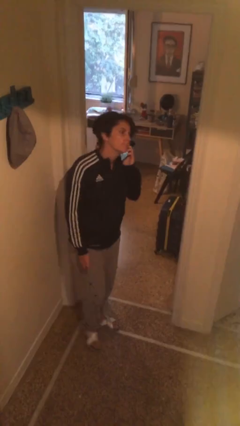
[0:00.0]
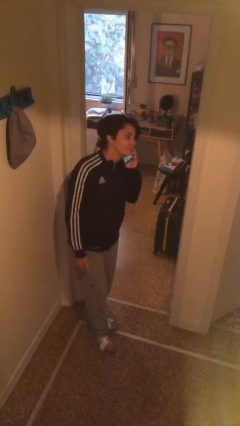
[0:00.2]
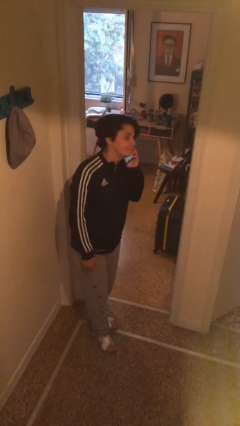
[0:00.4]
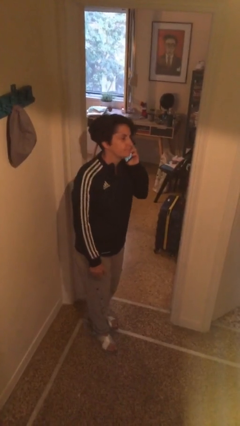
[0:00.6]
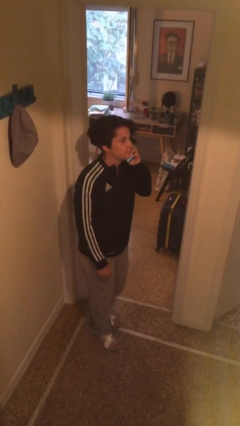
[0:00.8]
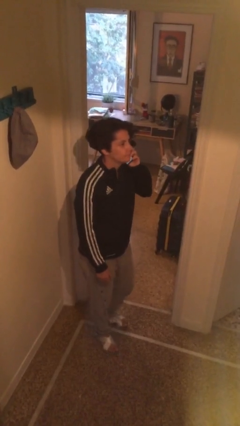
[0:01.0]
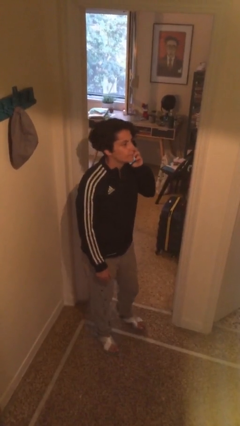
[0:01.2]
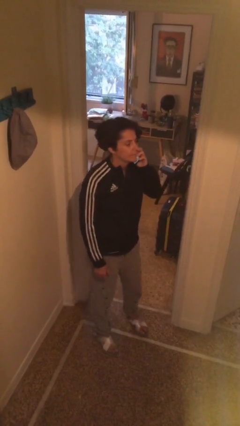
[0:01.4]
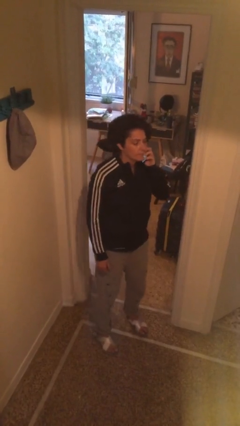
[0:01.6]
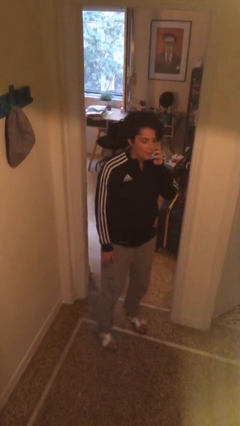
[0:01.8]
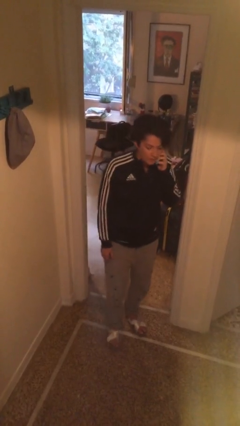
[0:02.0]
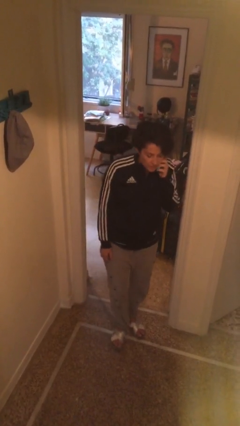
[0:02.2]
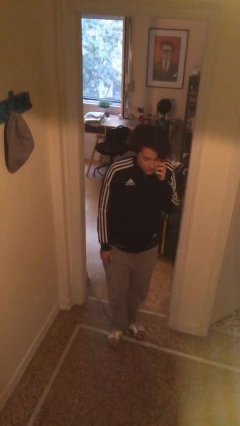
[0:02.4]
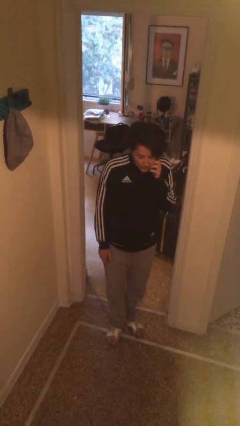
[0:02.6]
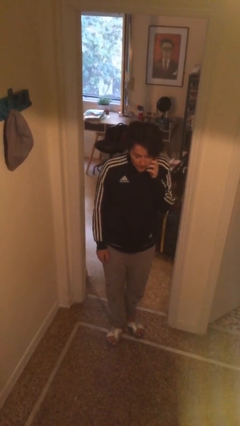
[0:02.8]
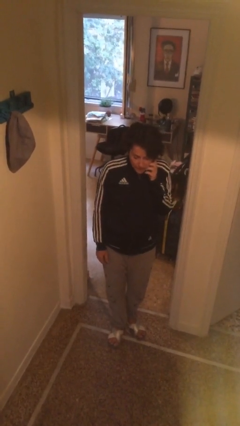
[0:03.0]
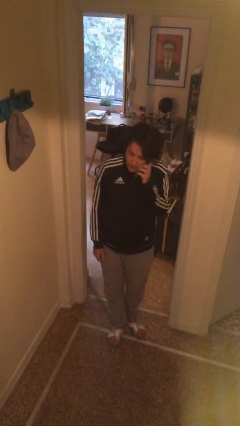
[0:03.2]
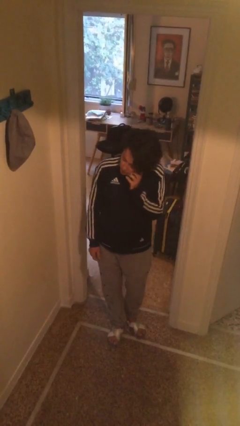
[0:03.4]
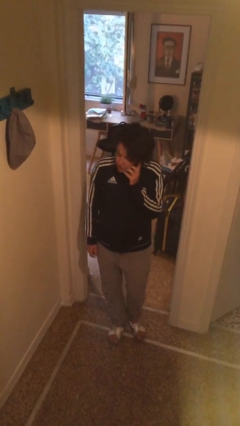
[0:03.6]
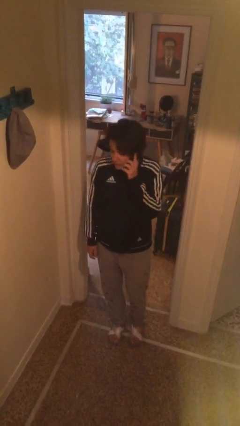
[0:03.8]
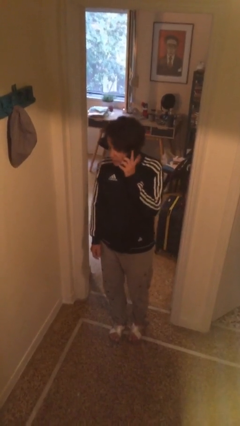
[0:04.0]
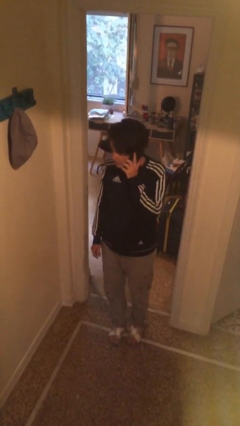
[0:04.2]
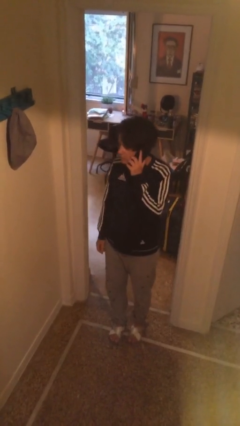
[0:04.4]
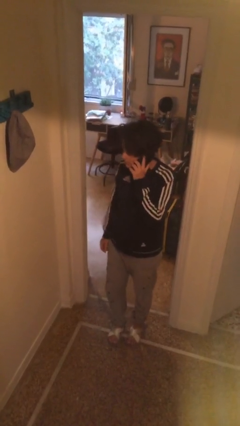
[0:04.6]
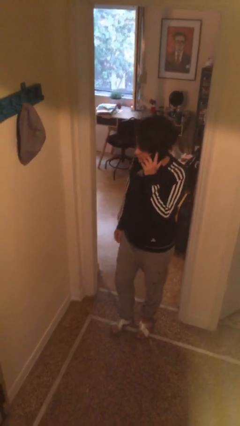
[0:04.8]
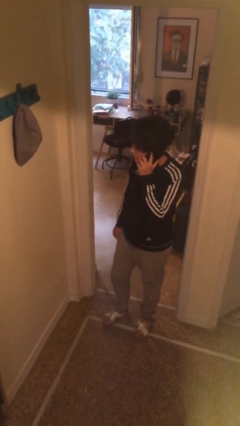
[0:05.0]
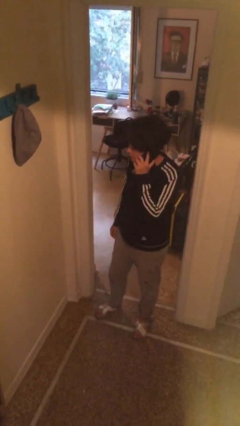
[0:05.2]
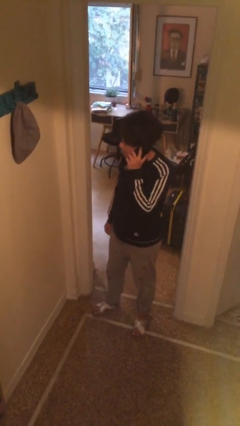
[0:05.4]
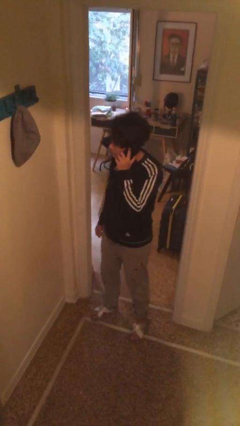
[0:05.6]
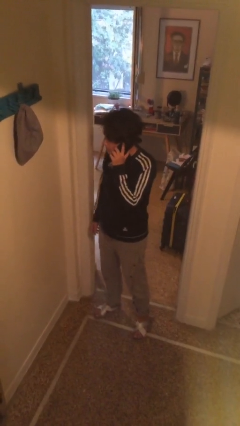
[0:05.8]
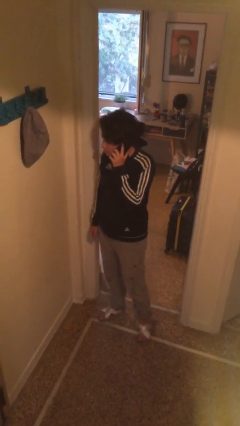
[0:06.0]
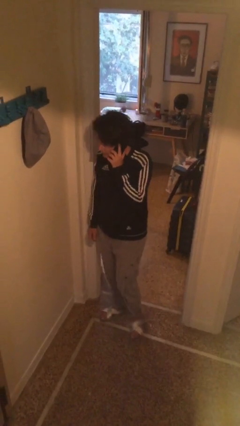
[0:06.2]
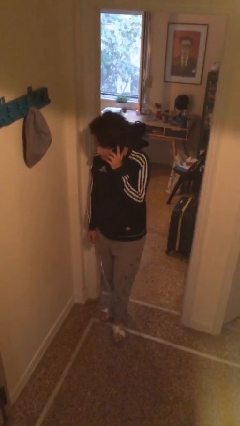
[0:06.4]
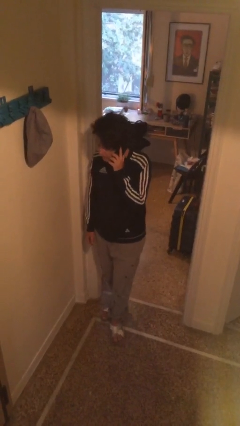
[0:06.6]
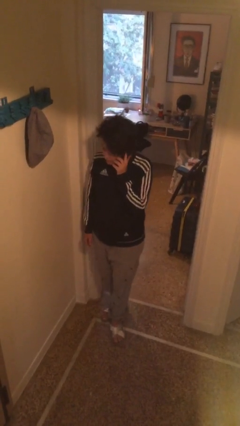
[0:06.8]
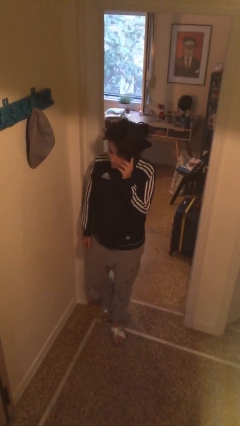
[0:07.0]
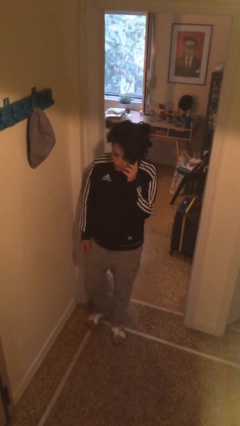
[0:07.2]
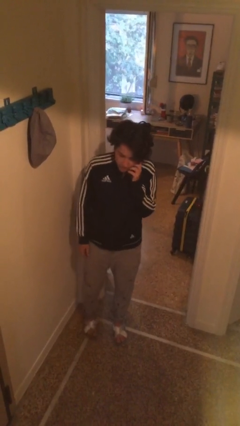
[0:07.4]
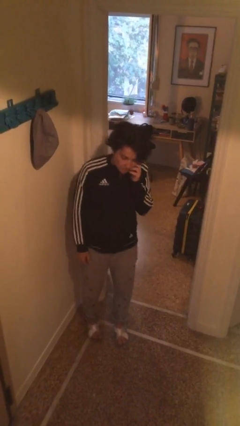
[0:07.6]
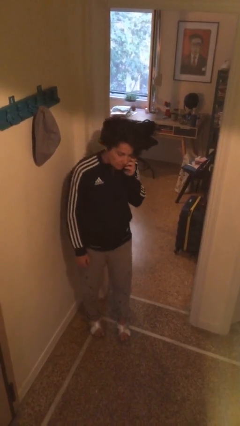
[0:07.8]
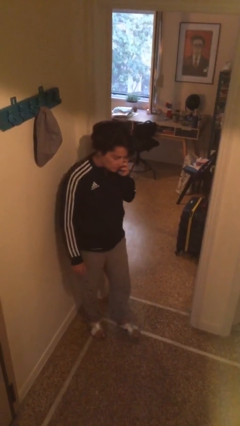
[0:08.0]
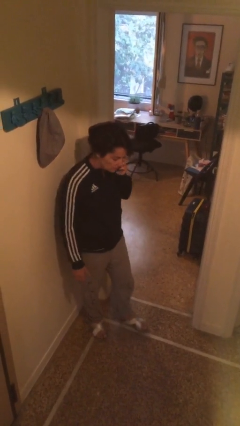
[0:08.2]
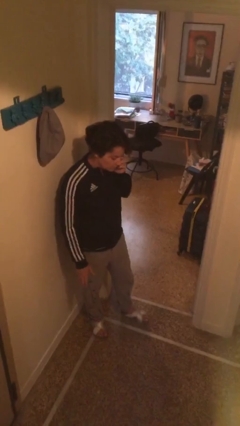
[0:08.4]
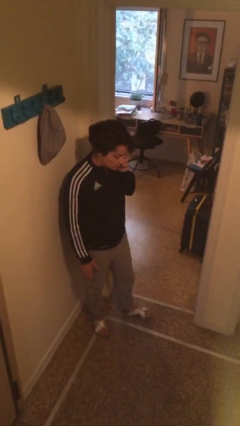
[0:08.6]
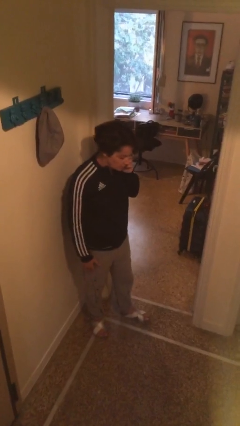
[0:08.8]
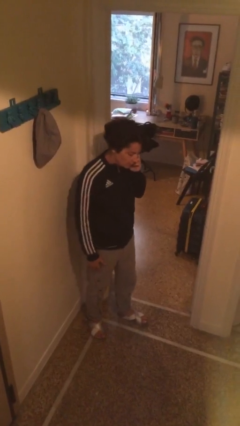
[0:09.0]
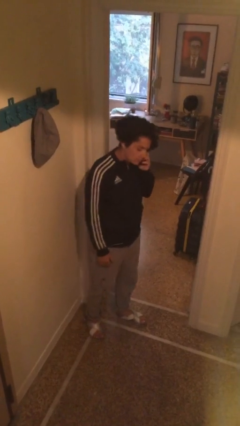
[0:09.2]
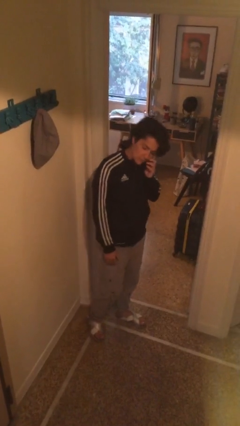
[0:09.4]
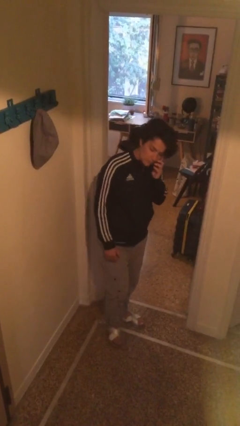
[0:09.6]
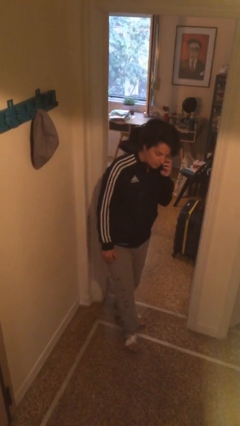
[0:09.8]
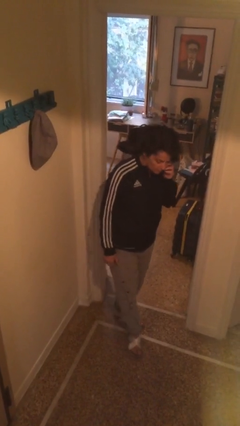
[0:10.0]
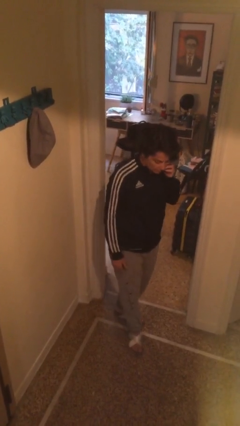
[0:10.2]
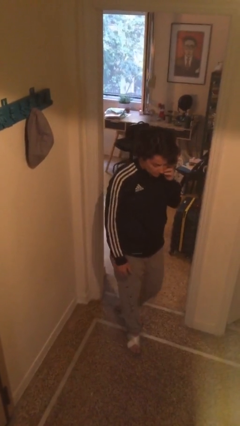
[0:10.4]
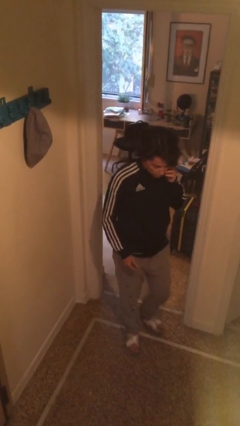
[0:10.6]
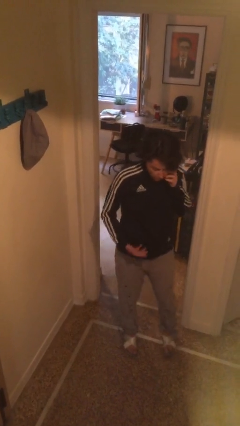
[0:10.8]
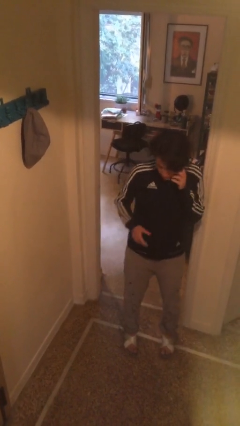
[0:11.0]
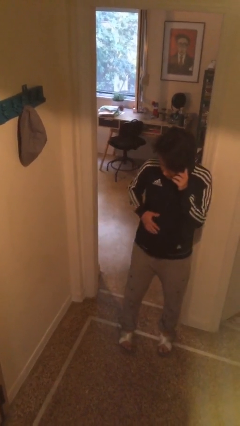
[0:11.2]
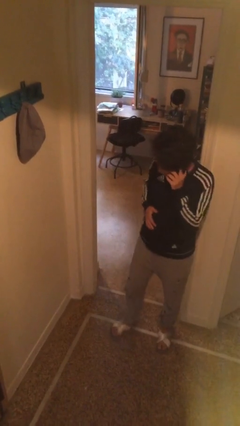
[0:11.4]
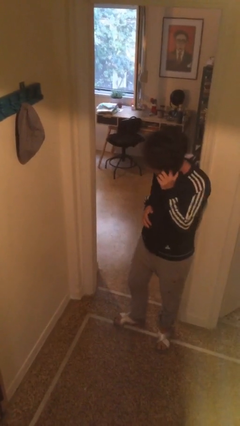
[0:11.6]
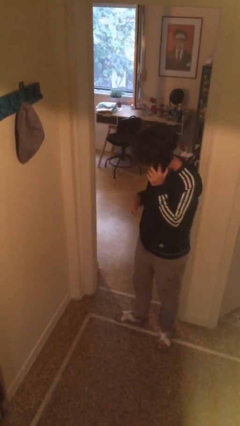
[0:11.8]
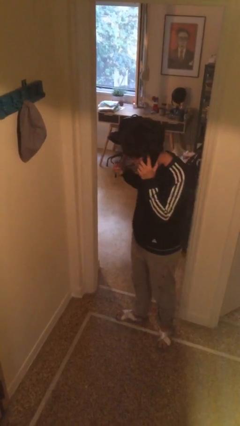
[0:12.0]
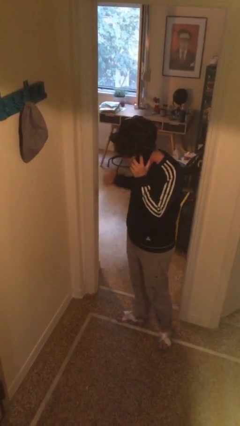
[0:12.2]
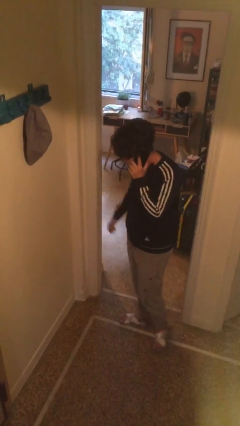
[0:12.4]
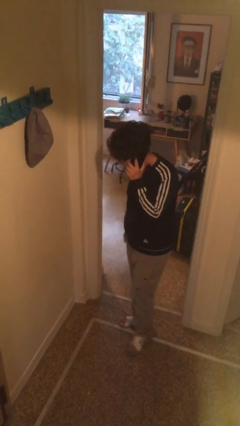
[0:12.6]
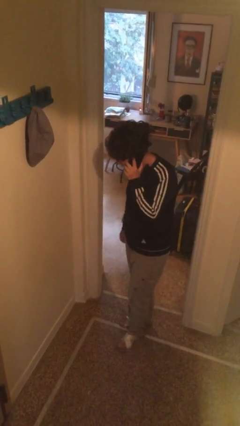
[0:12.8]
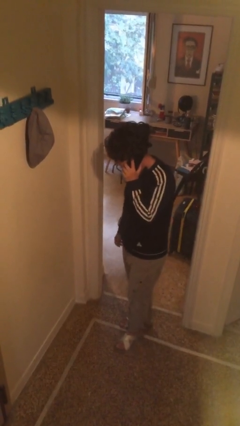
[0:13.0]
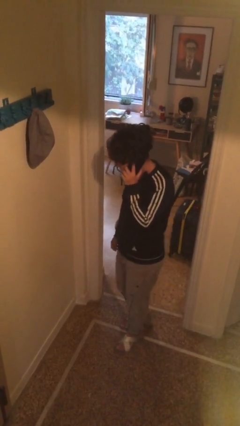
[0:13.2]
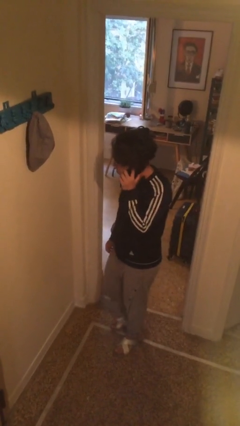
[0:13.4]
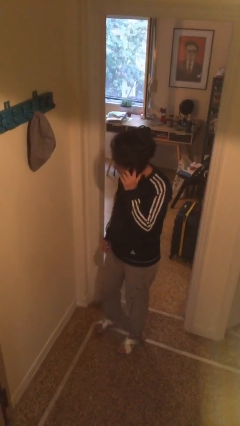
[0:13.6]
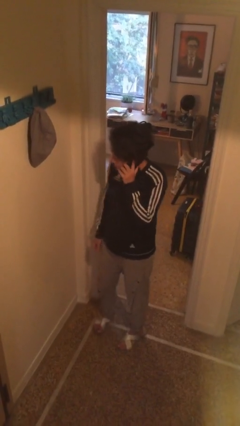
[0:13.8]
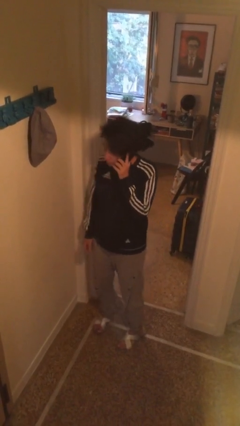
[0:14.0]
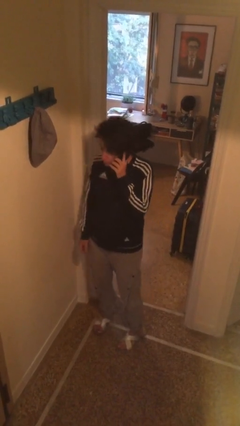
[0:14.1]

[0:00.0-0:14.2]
person talks on phone

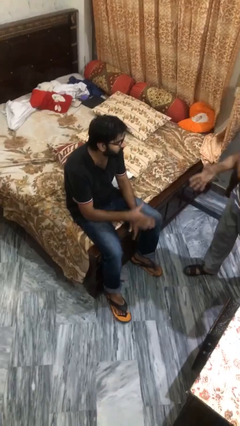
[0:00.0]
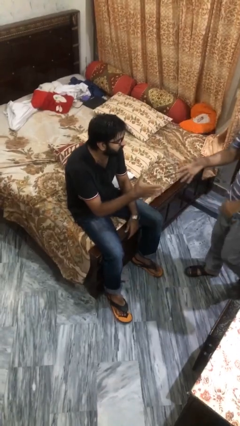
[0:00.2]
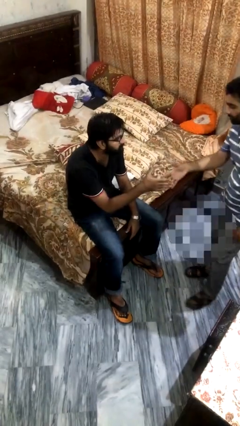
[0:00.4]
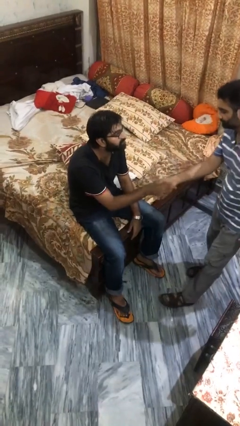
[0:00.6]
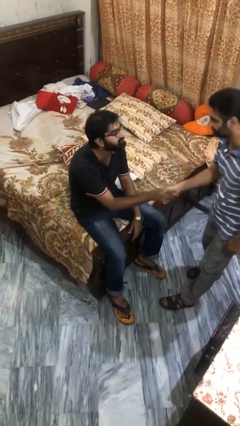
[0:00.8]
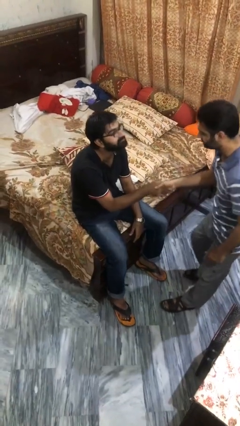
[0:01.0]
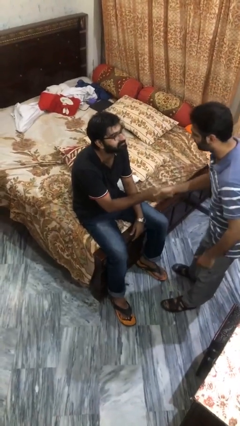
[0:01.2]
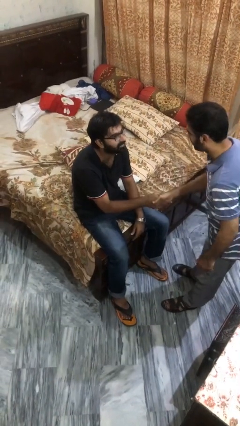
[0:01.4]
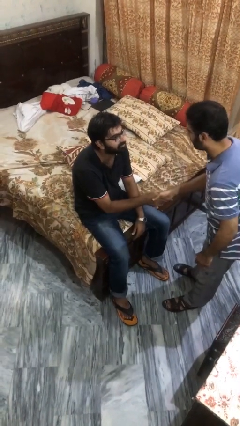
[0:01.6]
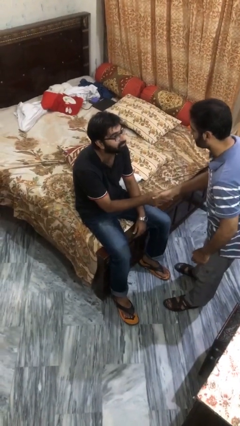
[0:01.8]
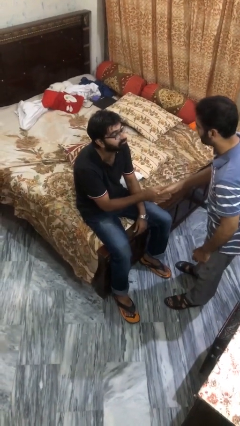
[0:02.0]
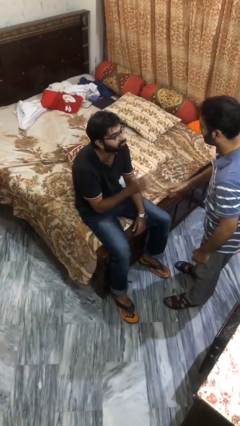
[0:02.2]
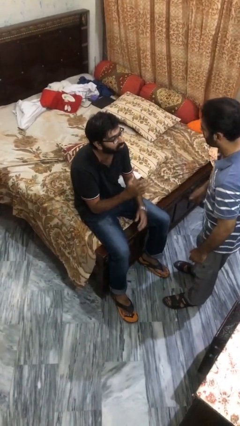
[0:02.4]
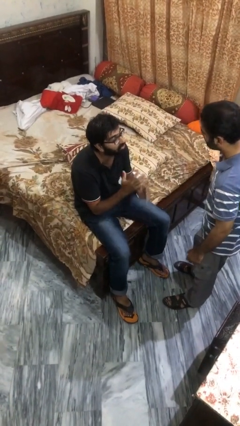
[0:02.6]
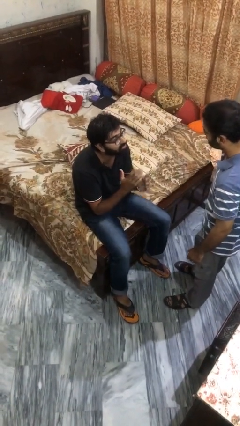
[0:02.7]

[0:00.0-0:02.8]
person shakes hand

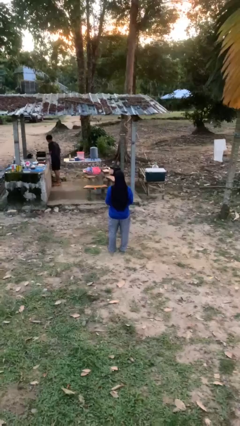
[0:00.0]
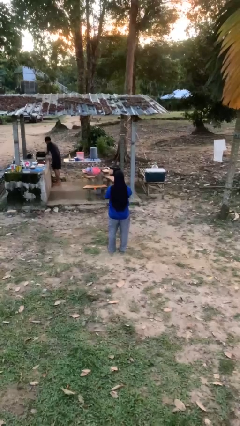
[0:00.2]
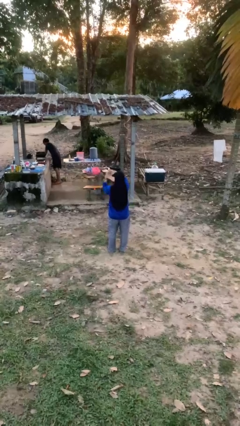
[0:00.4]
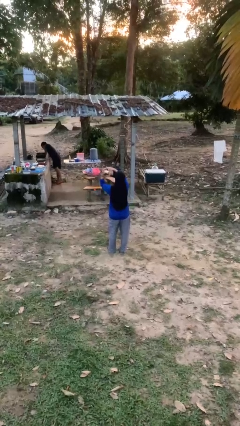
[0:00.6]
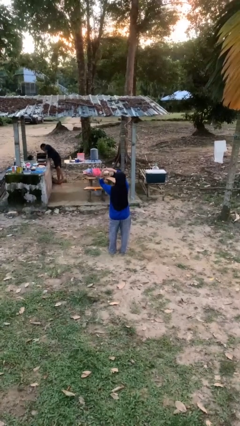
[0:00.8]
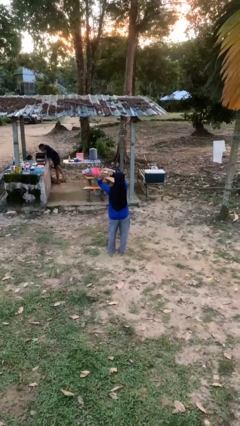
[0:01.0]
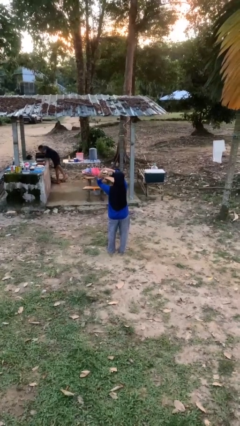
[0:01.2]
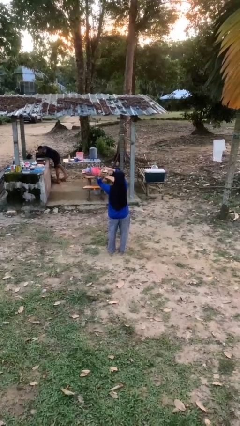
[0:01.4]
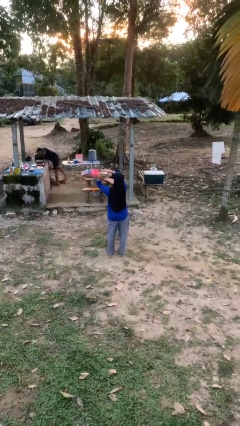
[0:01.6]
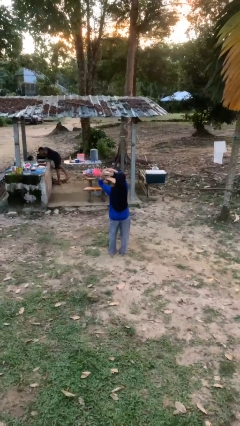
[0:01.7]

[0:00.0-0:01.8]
person gestures heart
